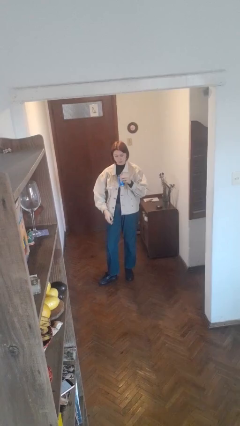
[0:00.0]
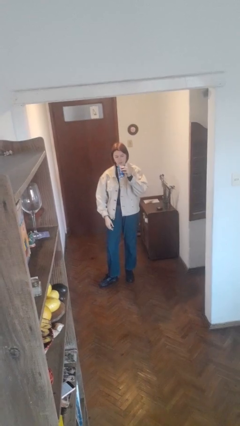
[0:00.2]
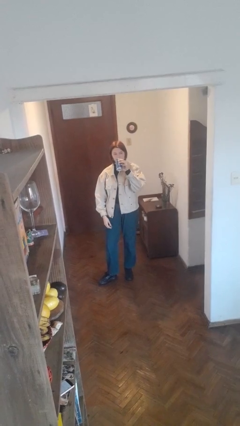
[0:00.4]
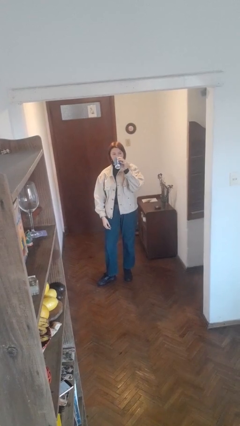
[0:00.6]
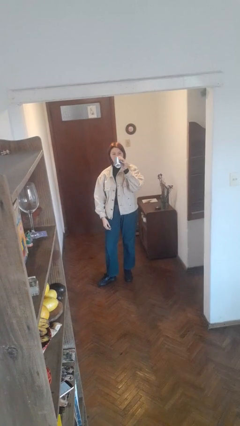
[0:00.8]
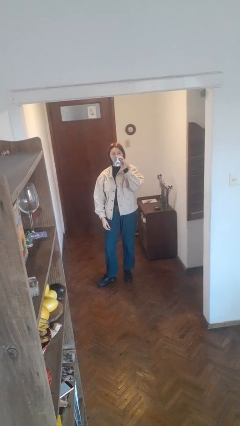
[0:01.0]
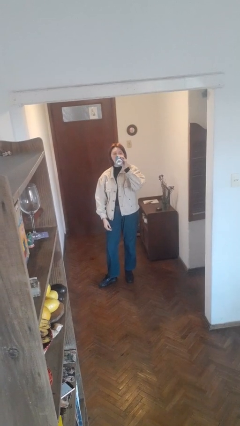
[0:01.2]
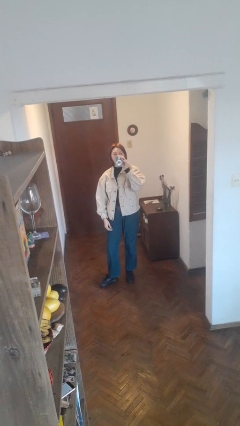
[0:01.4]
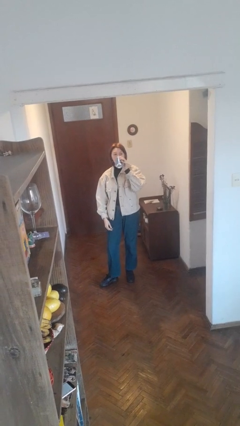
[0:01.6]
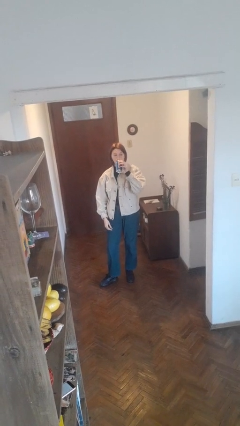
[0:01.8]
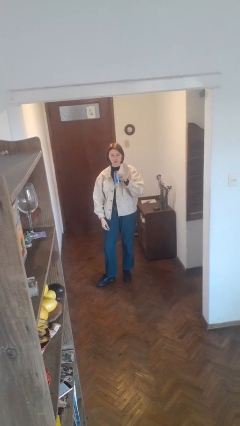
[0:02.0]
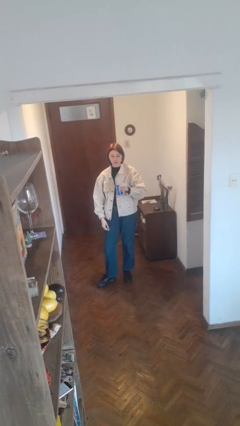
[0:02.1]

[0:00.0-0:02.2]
person drinks from beverage can

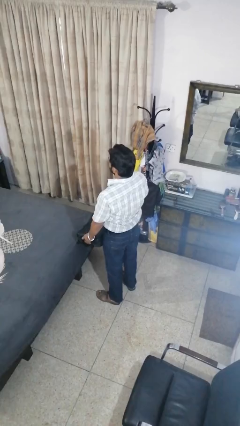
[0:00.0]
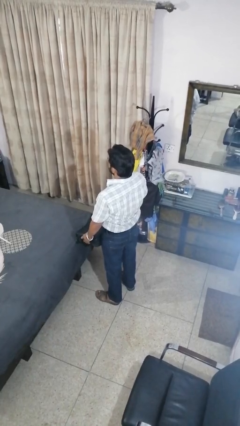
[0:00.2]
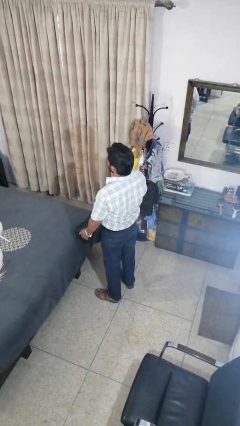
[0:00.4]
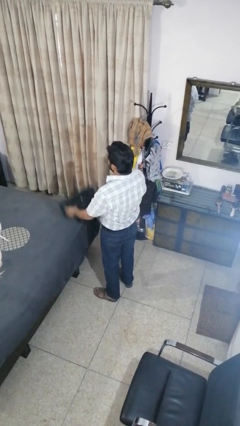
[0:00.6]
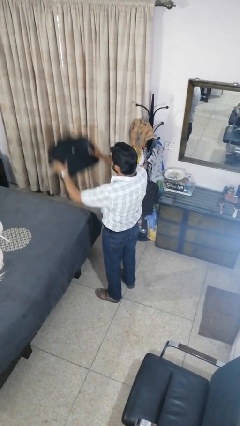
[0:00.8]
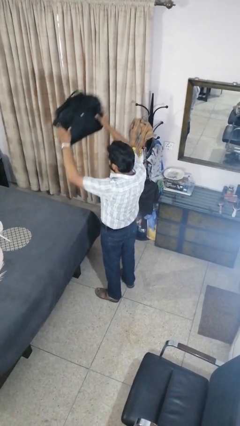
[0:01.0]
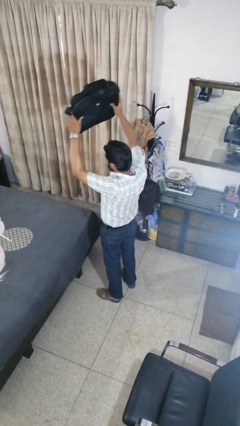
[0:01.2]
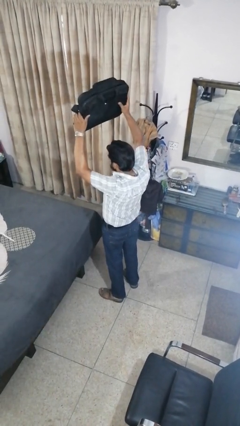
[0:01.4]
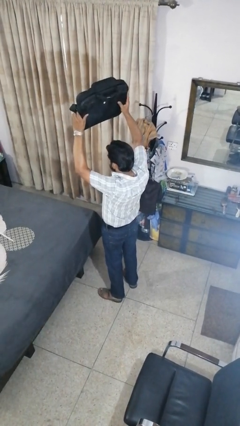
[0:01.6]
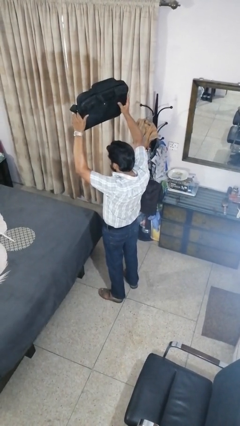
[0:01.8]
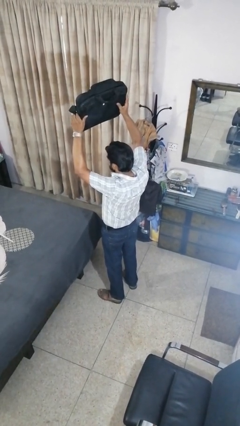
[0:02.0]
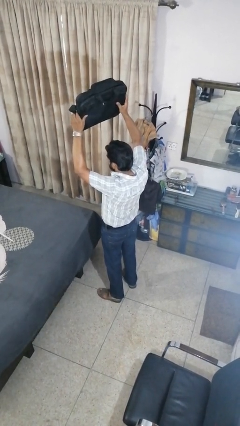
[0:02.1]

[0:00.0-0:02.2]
person holds object above head

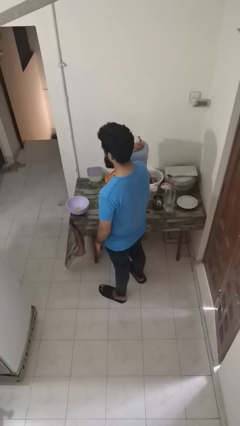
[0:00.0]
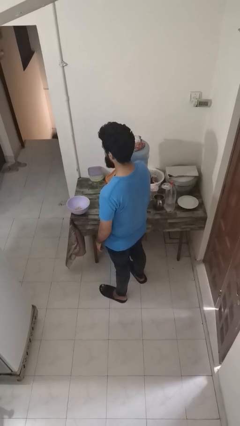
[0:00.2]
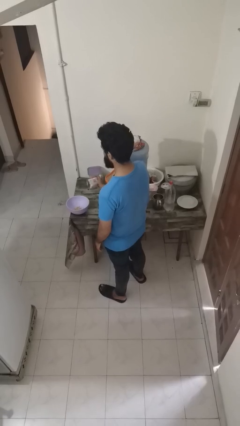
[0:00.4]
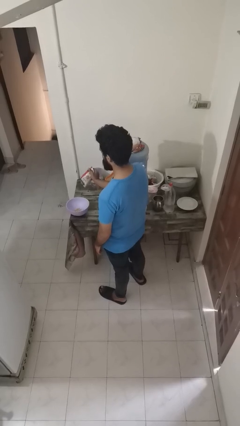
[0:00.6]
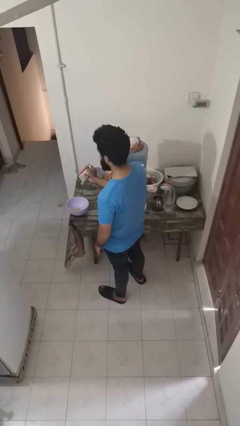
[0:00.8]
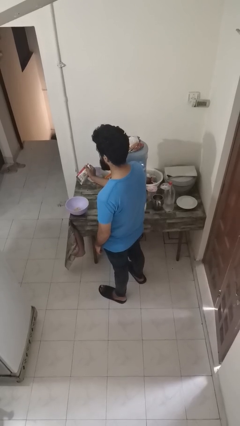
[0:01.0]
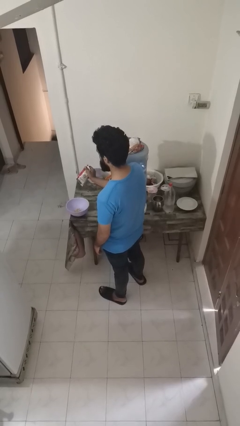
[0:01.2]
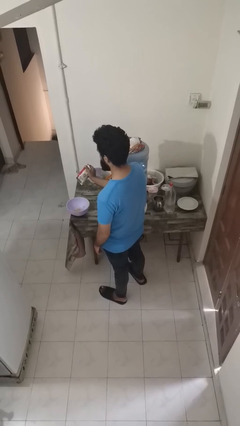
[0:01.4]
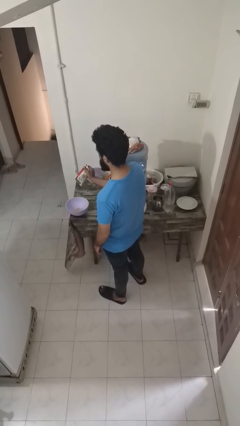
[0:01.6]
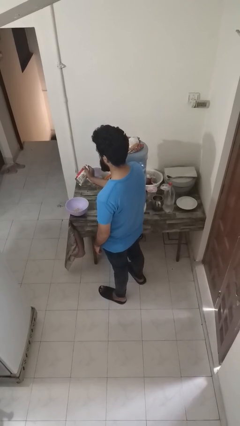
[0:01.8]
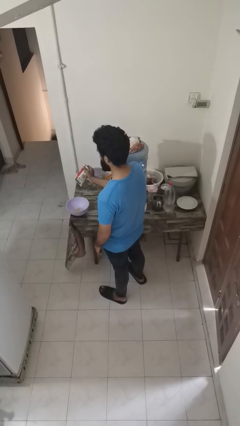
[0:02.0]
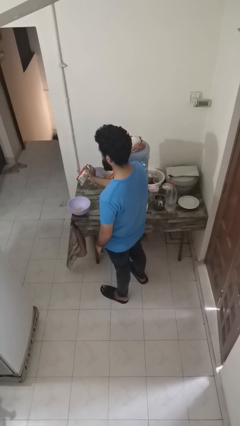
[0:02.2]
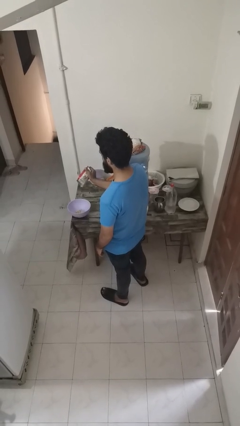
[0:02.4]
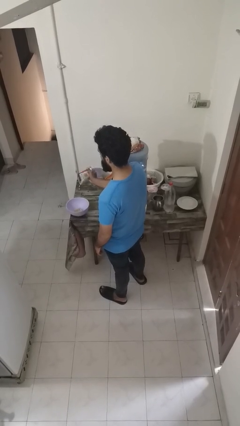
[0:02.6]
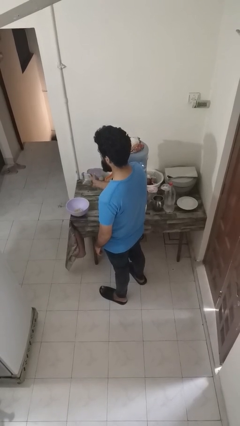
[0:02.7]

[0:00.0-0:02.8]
person pours into bowl

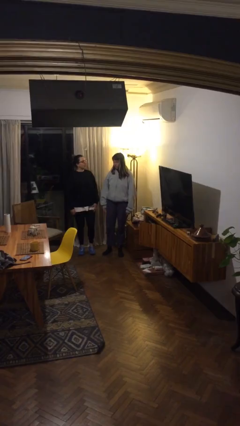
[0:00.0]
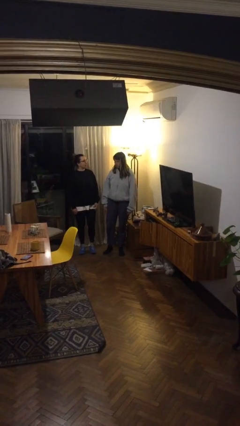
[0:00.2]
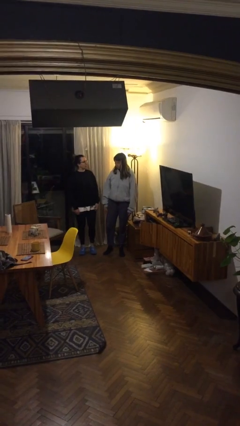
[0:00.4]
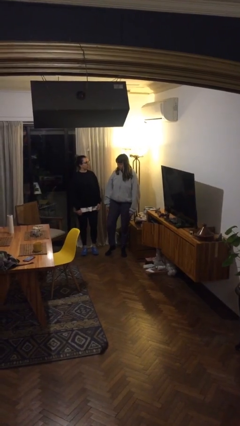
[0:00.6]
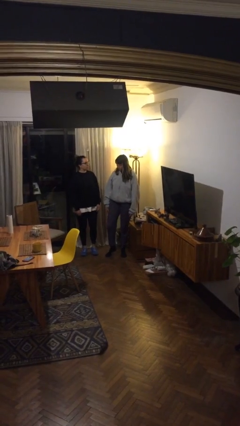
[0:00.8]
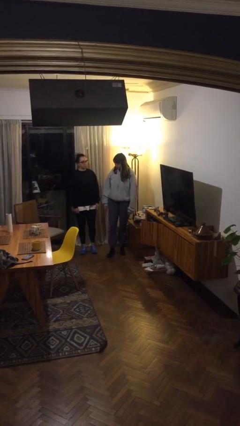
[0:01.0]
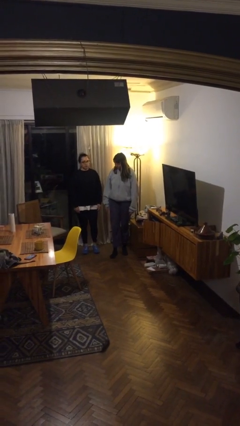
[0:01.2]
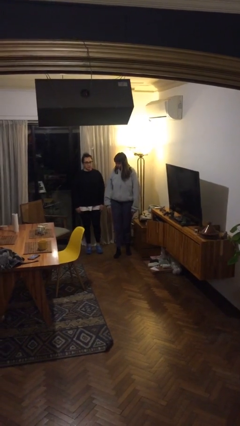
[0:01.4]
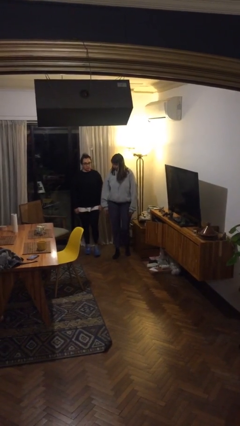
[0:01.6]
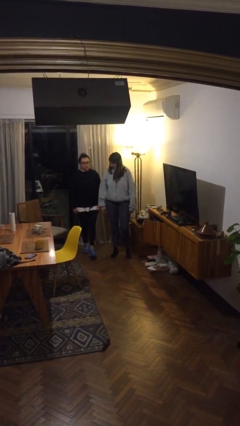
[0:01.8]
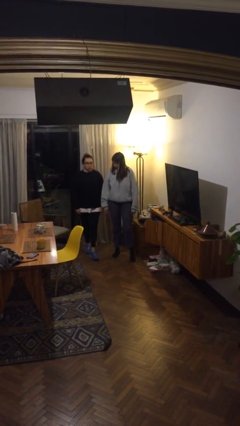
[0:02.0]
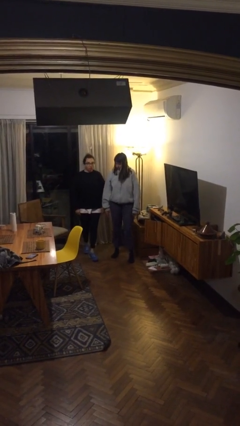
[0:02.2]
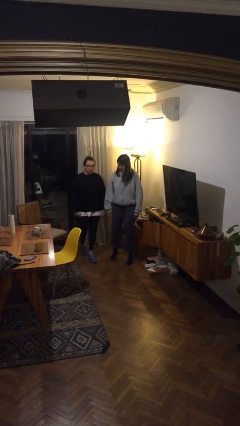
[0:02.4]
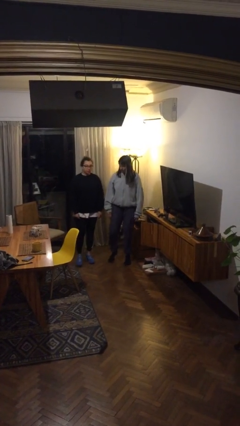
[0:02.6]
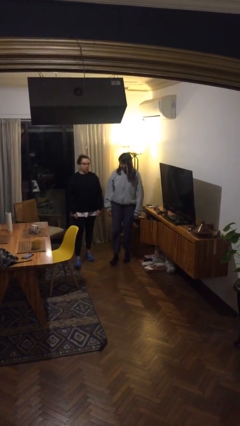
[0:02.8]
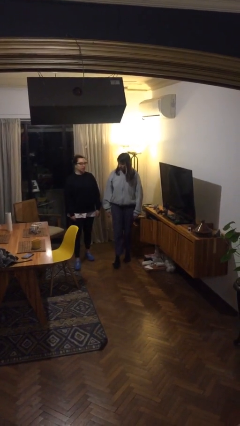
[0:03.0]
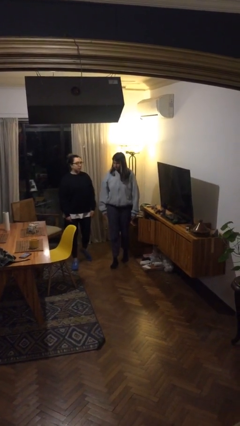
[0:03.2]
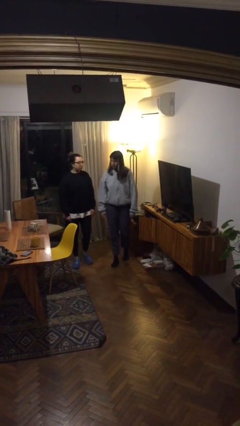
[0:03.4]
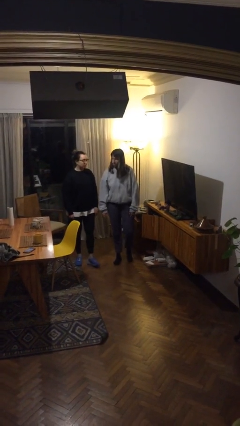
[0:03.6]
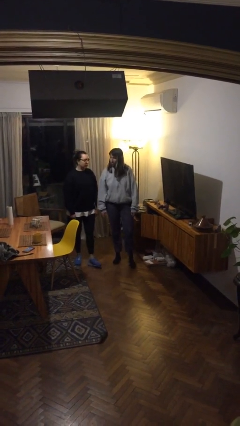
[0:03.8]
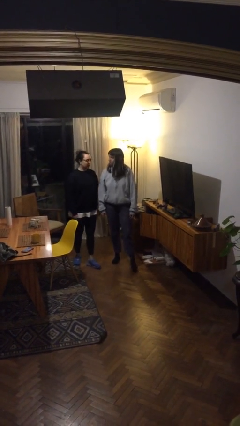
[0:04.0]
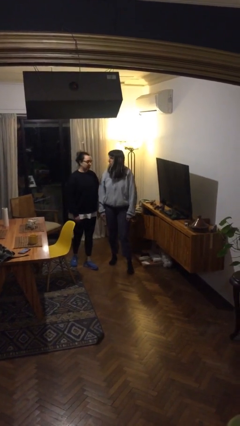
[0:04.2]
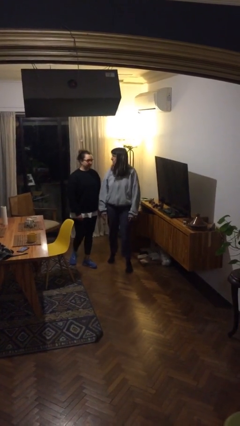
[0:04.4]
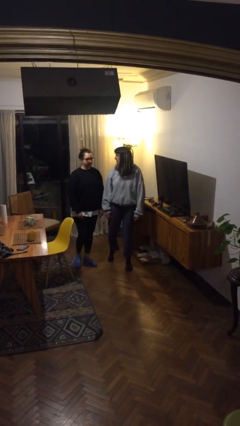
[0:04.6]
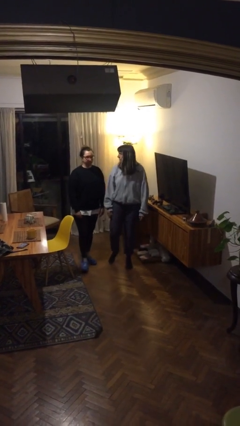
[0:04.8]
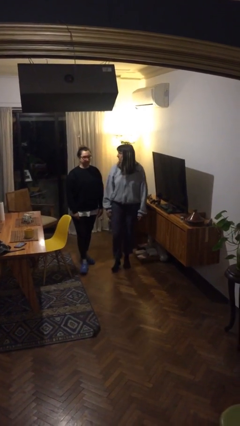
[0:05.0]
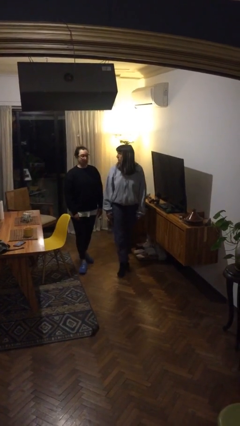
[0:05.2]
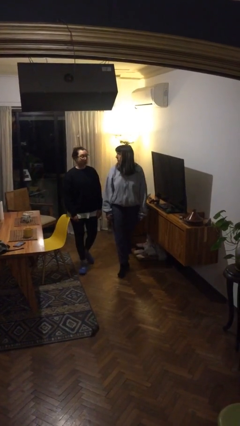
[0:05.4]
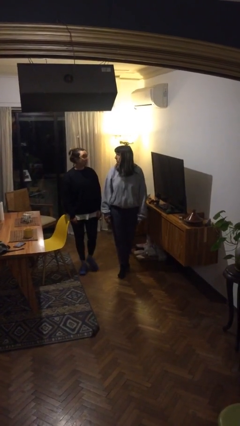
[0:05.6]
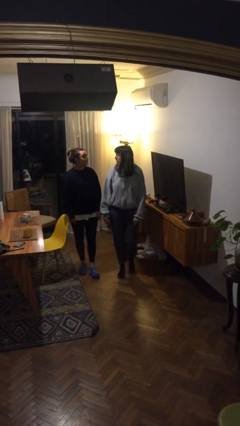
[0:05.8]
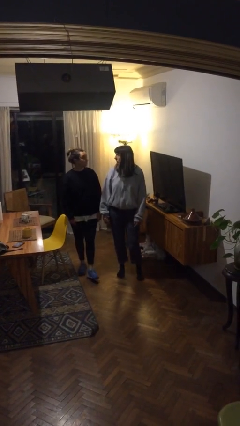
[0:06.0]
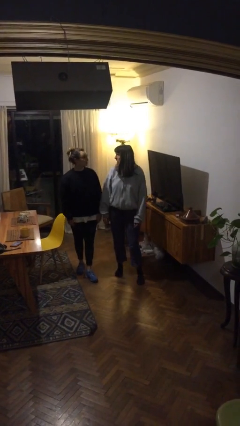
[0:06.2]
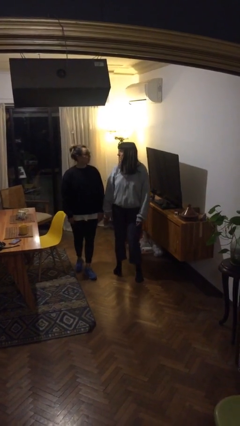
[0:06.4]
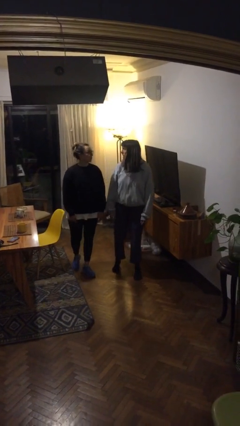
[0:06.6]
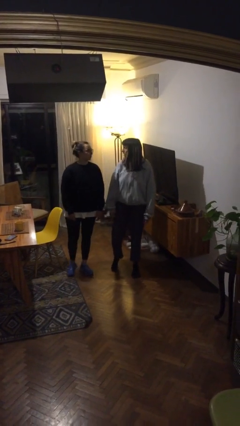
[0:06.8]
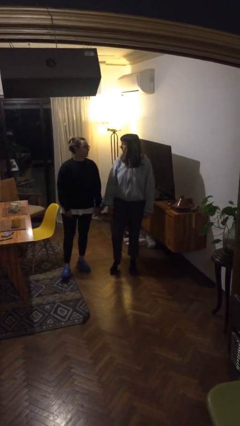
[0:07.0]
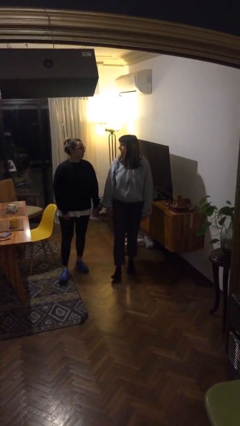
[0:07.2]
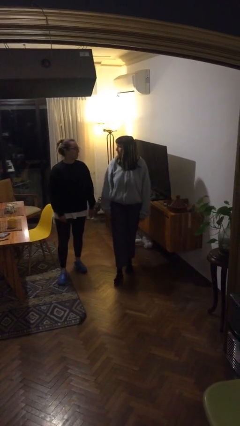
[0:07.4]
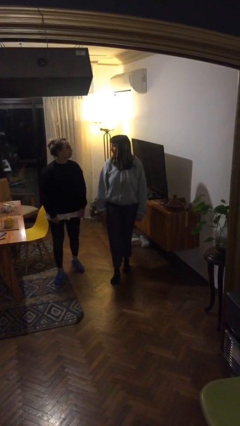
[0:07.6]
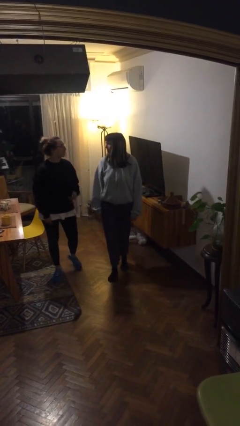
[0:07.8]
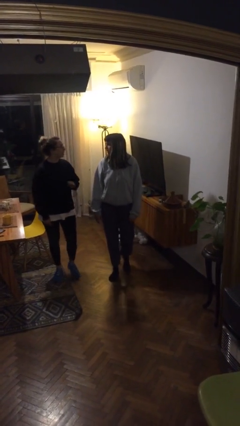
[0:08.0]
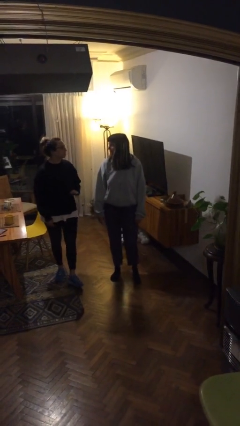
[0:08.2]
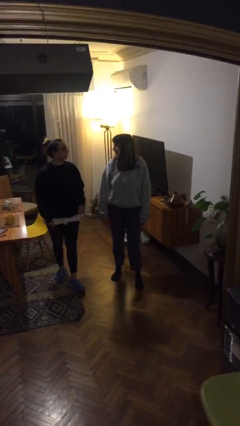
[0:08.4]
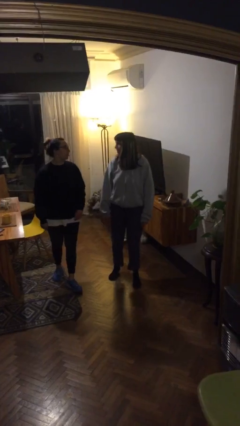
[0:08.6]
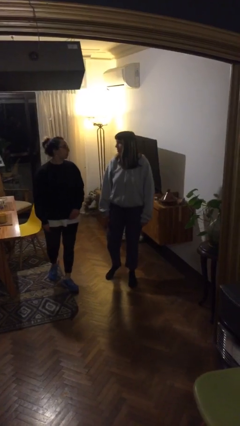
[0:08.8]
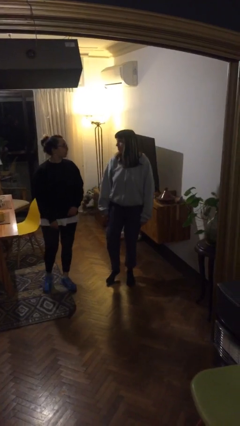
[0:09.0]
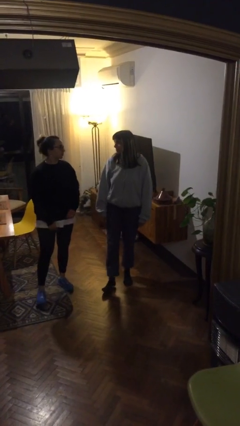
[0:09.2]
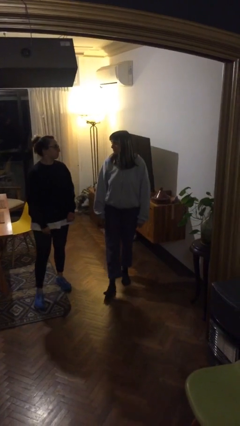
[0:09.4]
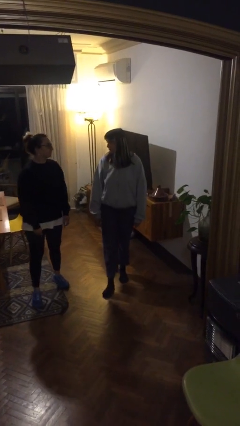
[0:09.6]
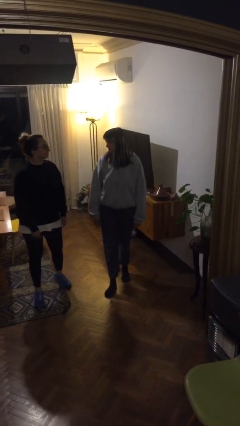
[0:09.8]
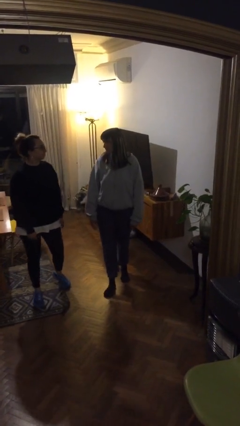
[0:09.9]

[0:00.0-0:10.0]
person talks to person

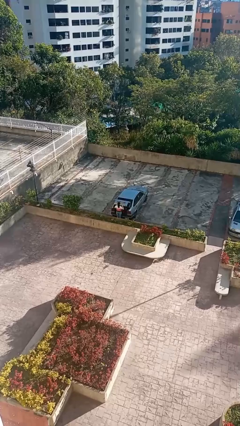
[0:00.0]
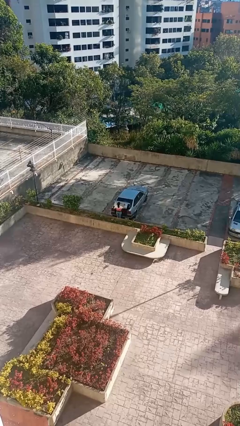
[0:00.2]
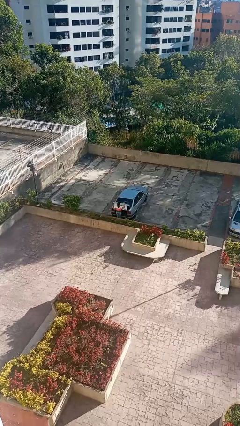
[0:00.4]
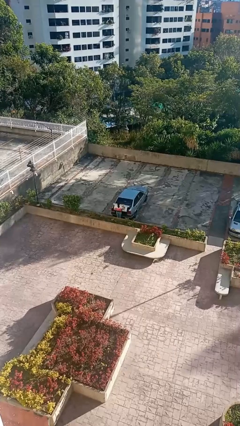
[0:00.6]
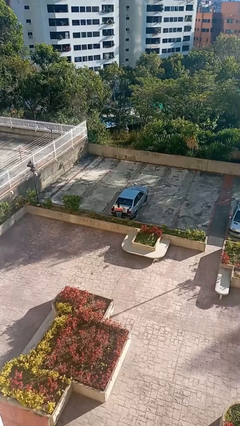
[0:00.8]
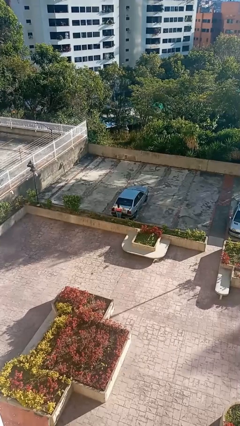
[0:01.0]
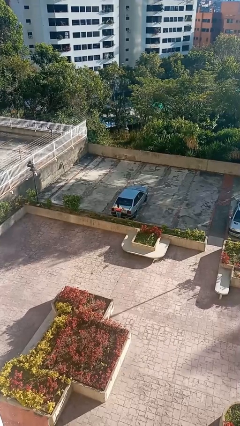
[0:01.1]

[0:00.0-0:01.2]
person closes car trunk
